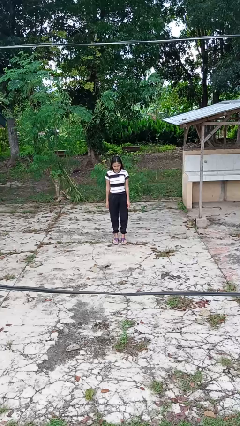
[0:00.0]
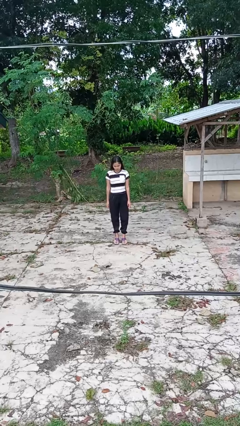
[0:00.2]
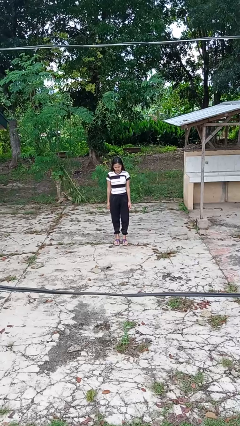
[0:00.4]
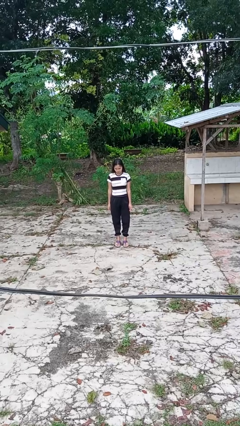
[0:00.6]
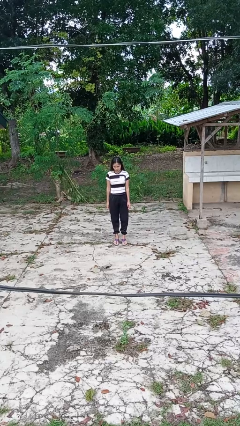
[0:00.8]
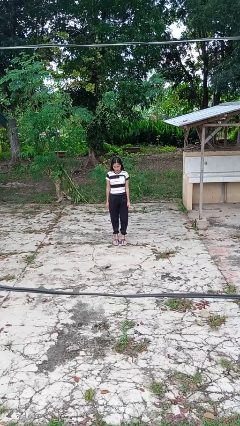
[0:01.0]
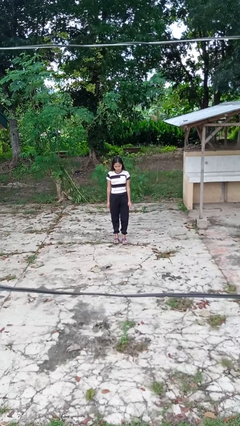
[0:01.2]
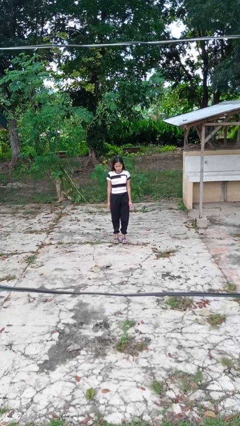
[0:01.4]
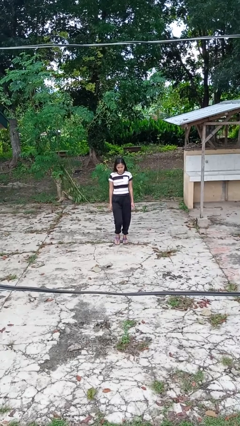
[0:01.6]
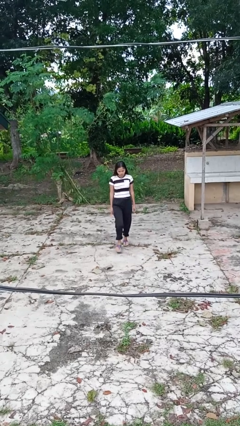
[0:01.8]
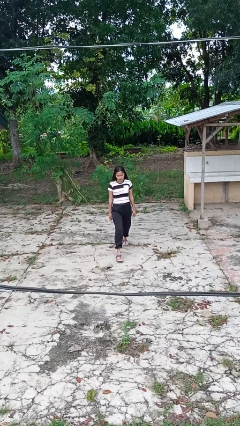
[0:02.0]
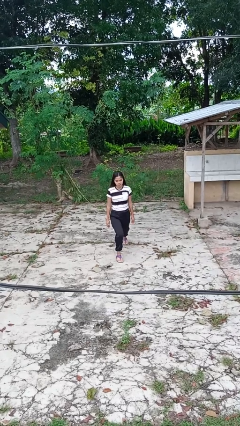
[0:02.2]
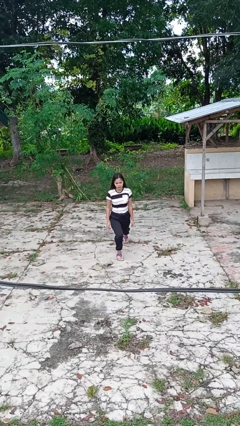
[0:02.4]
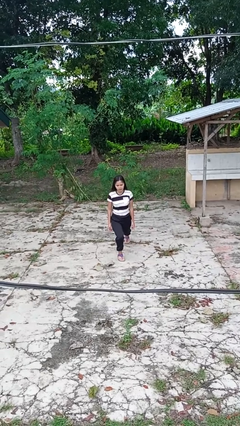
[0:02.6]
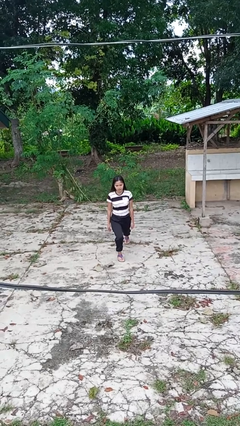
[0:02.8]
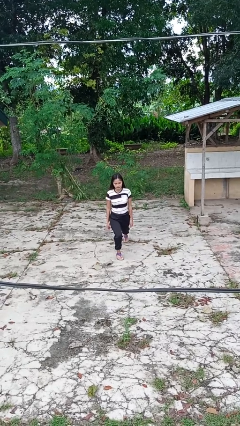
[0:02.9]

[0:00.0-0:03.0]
person exercises with lunges

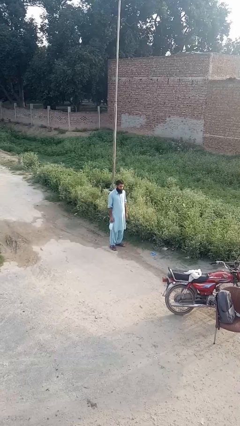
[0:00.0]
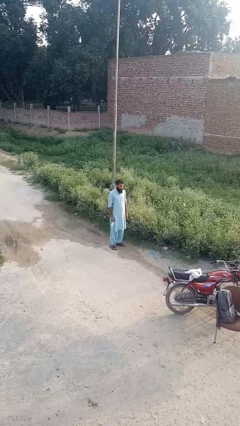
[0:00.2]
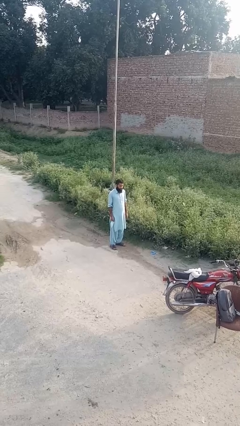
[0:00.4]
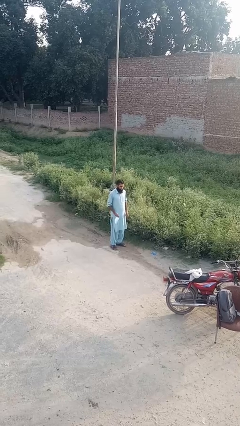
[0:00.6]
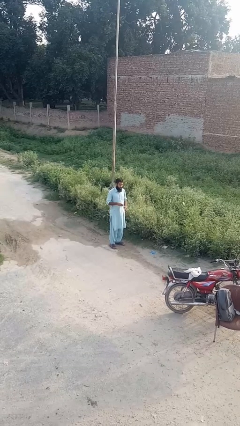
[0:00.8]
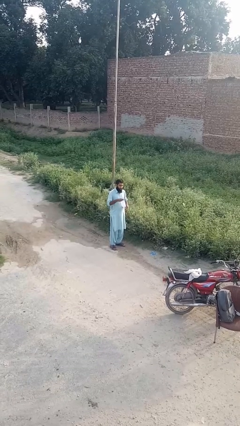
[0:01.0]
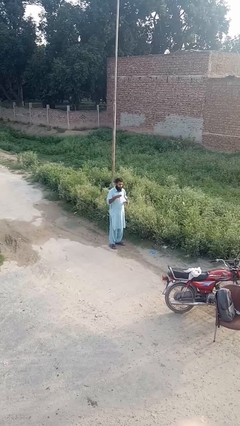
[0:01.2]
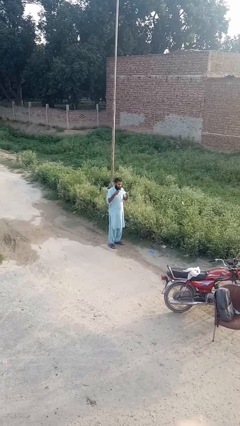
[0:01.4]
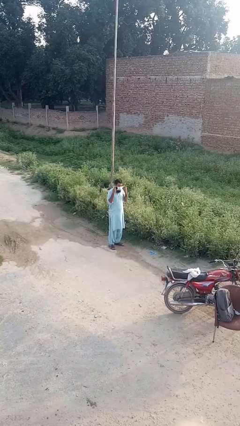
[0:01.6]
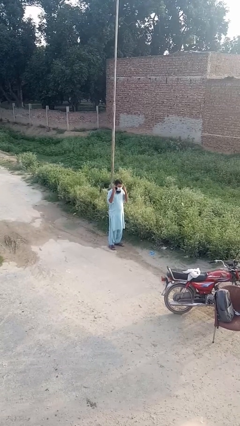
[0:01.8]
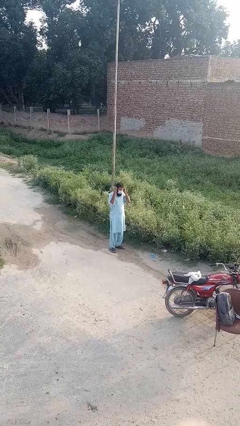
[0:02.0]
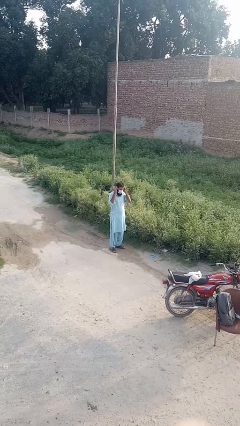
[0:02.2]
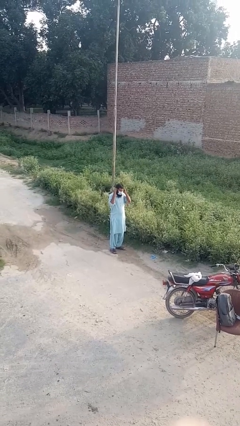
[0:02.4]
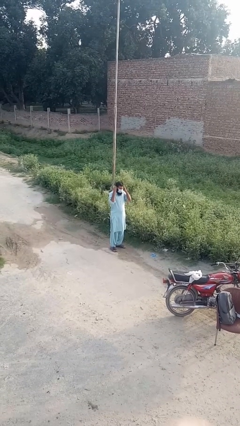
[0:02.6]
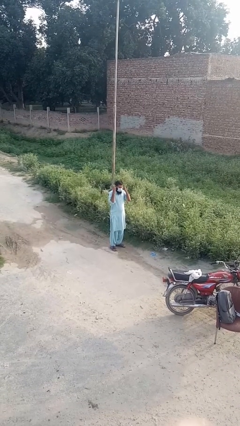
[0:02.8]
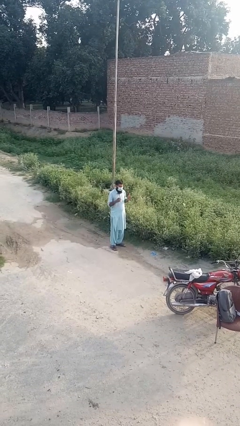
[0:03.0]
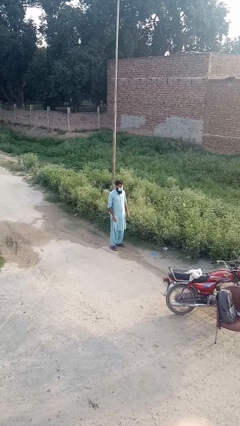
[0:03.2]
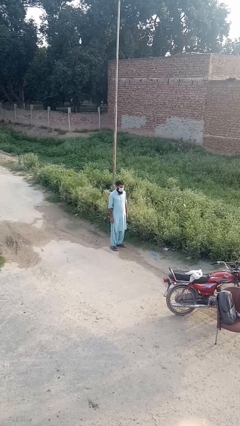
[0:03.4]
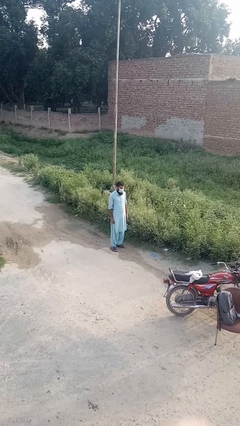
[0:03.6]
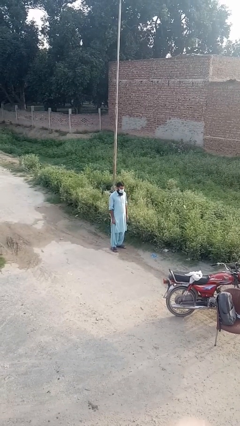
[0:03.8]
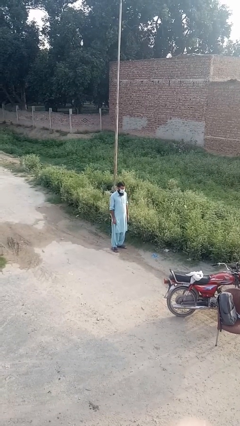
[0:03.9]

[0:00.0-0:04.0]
person puts on facemask

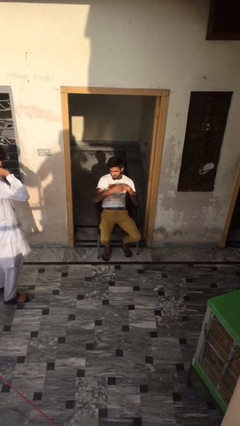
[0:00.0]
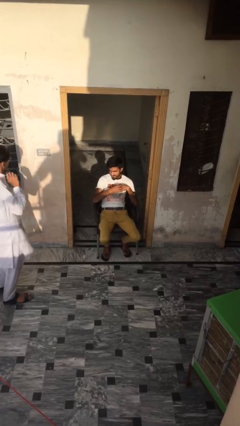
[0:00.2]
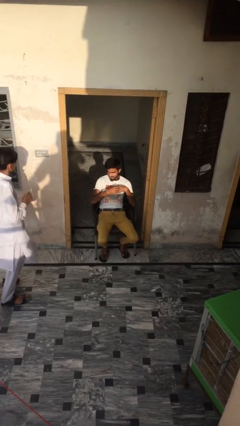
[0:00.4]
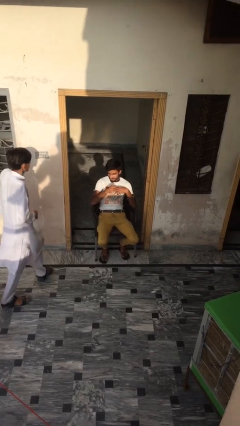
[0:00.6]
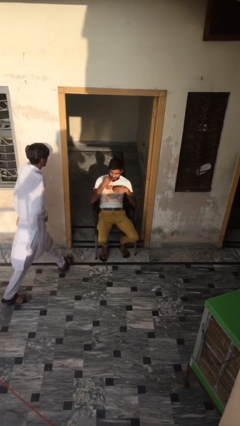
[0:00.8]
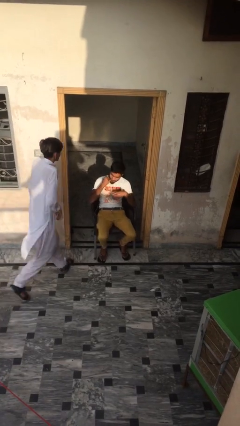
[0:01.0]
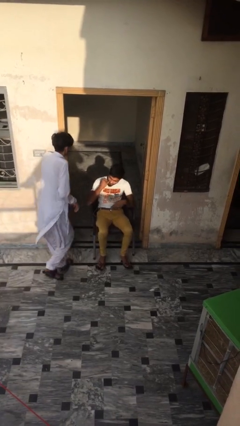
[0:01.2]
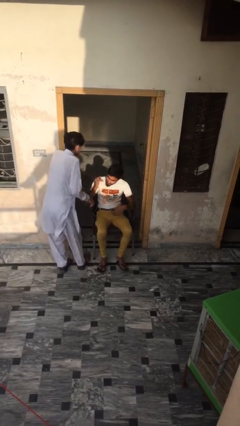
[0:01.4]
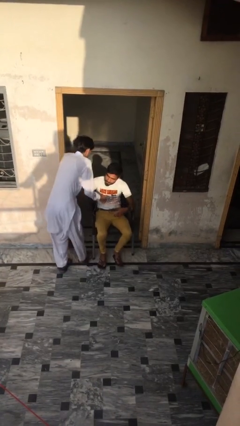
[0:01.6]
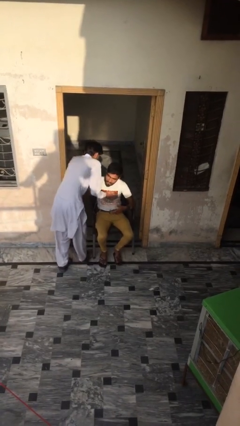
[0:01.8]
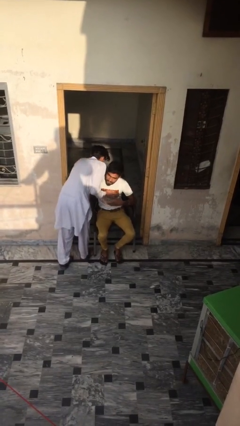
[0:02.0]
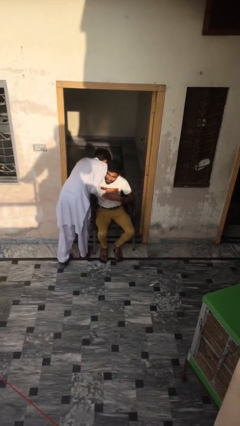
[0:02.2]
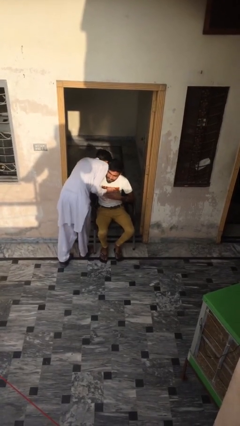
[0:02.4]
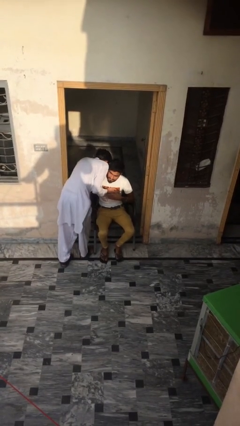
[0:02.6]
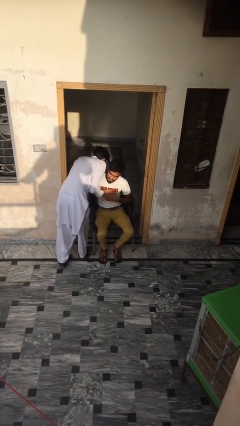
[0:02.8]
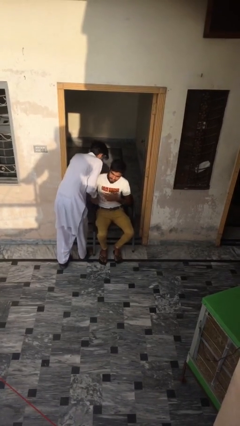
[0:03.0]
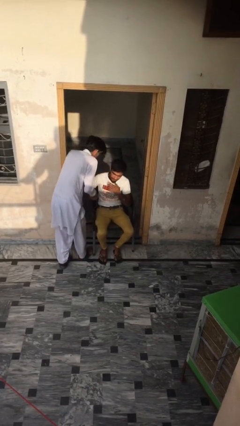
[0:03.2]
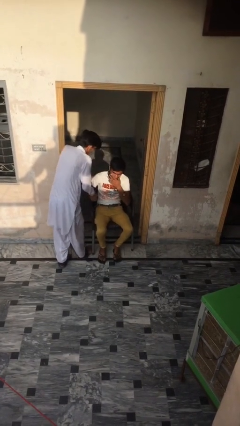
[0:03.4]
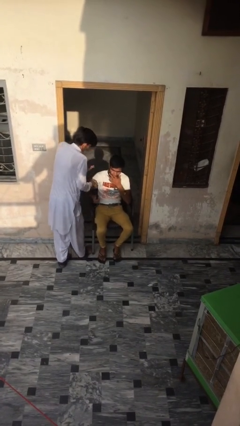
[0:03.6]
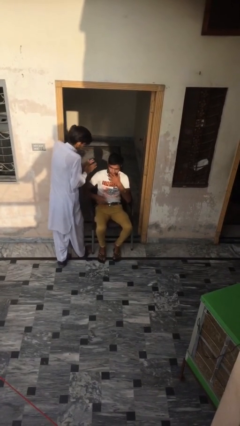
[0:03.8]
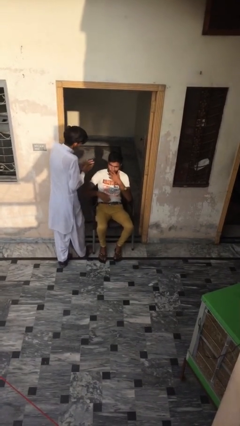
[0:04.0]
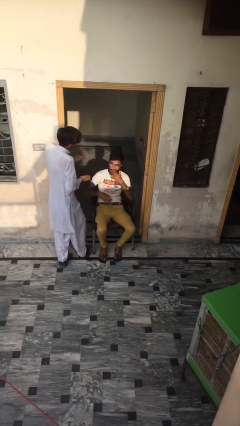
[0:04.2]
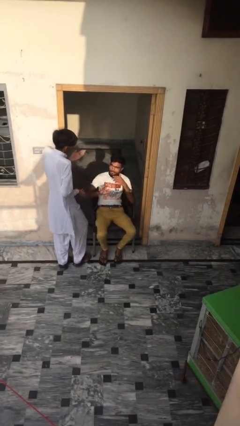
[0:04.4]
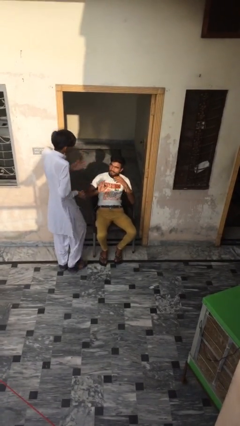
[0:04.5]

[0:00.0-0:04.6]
person embraces person

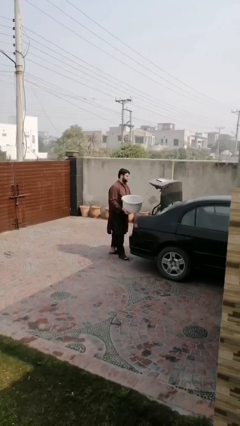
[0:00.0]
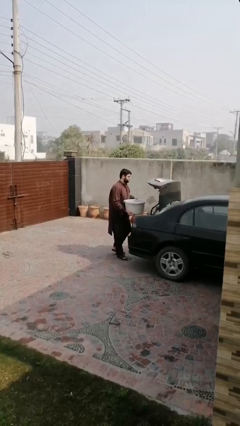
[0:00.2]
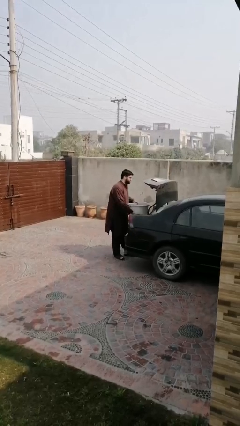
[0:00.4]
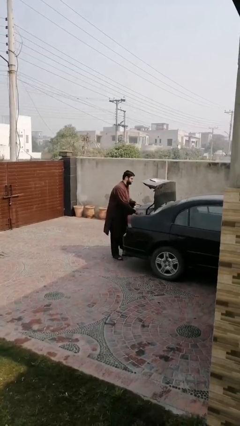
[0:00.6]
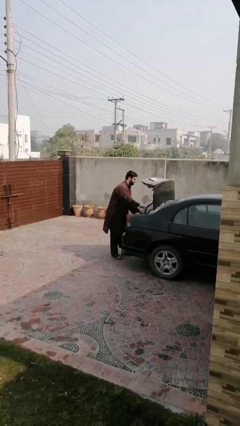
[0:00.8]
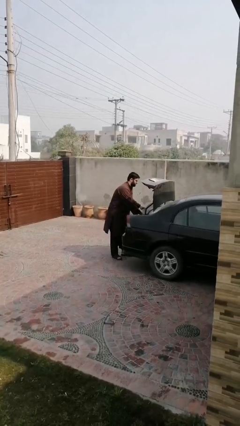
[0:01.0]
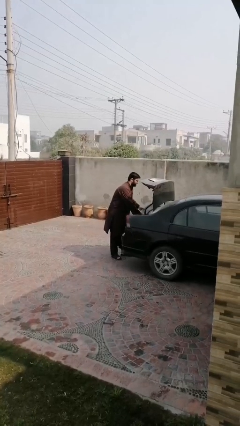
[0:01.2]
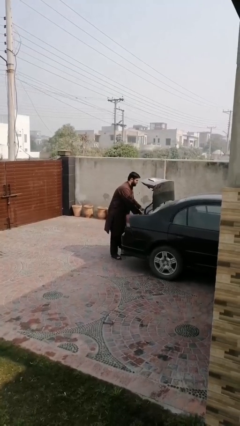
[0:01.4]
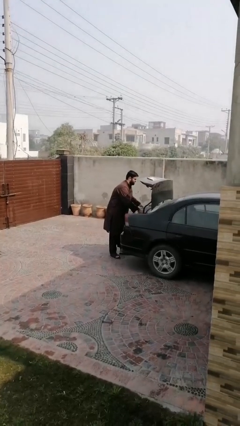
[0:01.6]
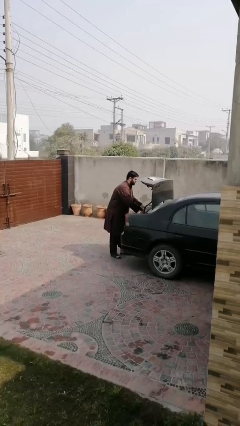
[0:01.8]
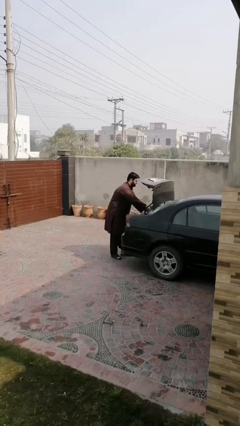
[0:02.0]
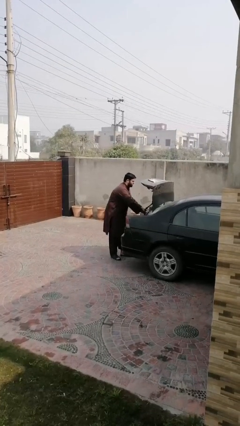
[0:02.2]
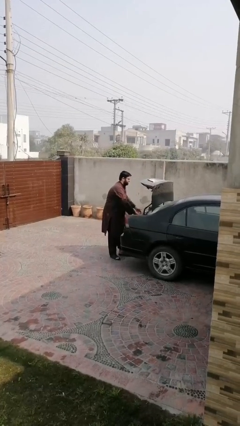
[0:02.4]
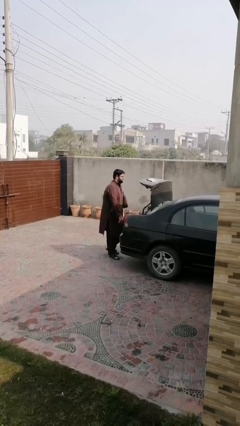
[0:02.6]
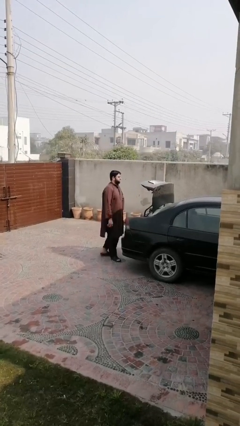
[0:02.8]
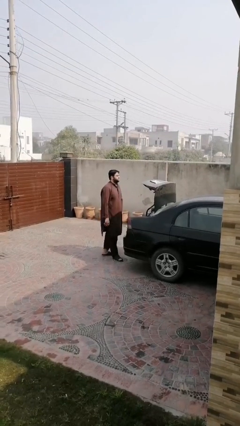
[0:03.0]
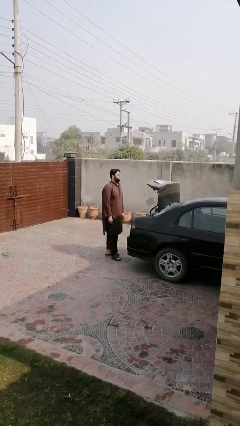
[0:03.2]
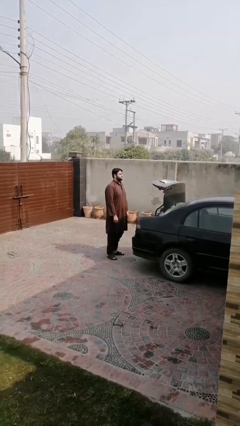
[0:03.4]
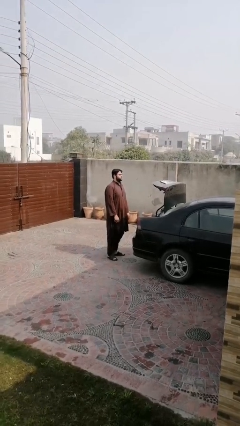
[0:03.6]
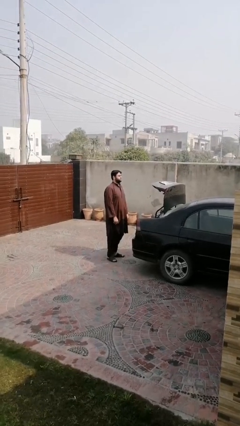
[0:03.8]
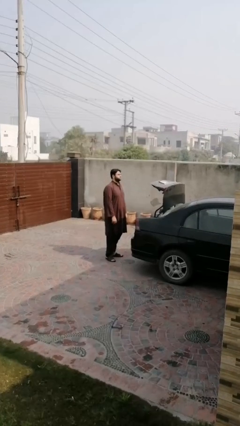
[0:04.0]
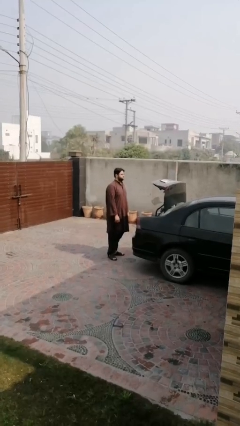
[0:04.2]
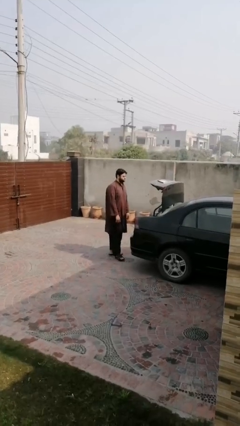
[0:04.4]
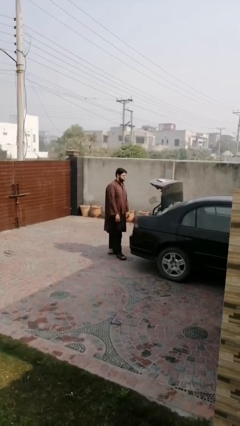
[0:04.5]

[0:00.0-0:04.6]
person loads car

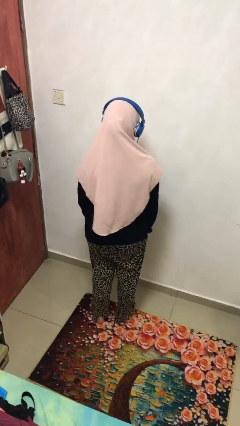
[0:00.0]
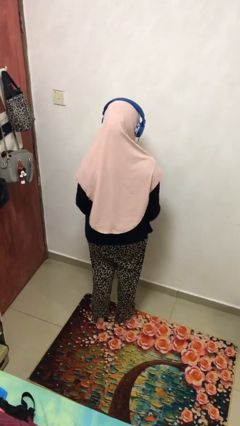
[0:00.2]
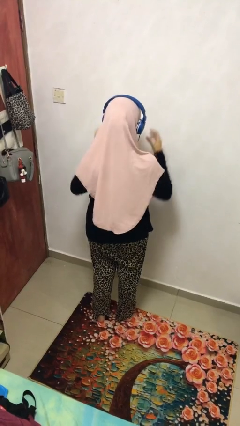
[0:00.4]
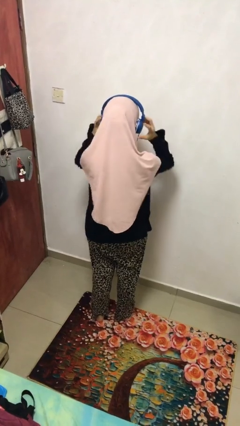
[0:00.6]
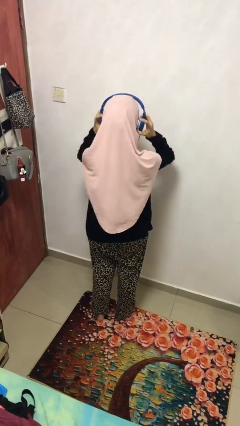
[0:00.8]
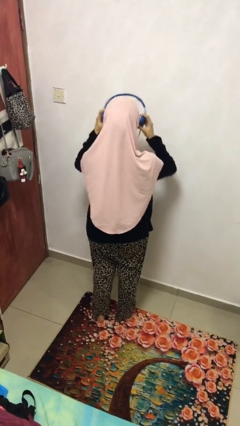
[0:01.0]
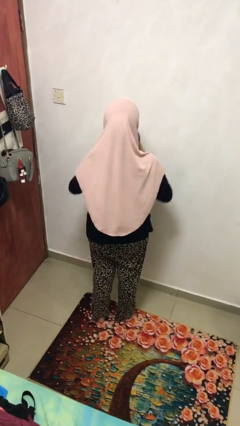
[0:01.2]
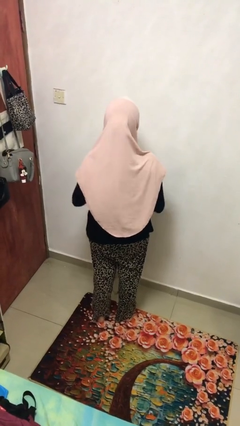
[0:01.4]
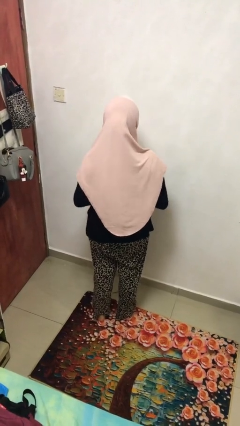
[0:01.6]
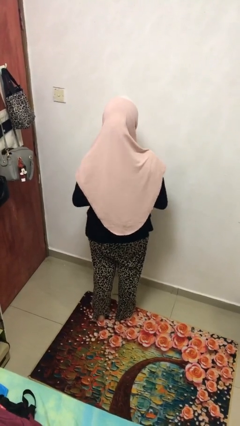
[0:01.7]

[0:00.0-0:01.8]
person takes off headphones
